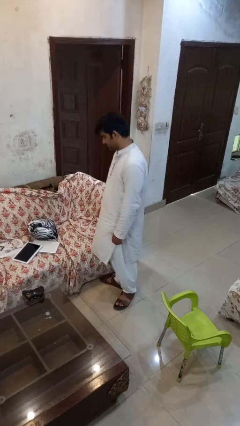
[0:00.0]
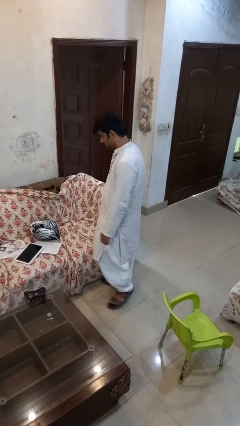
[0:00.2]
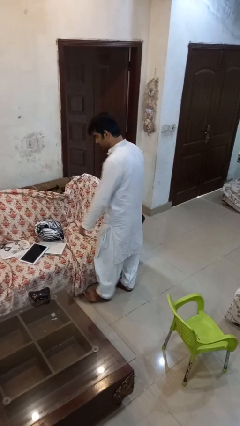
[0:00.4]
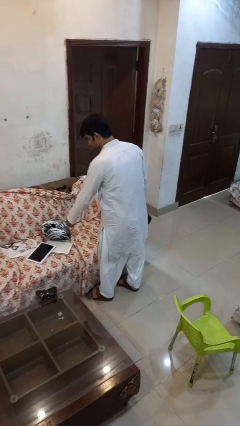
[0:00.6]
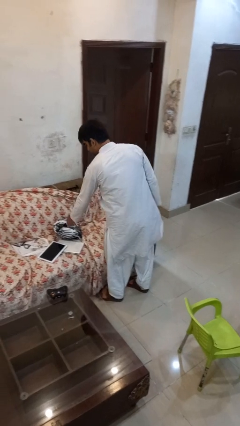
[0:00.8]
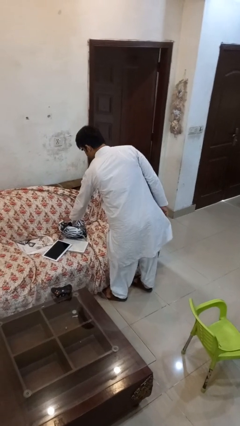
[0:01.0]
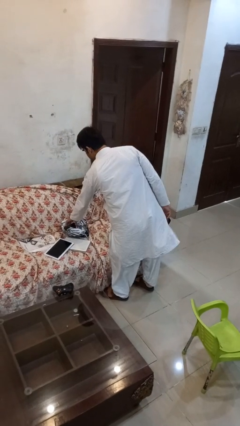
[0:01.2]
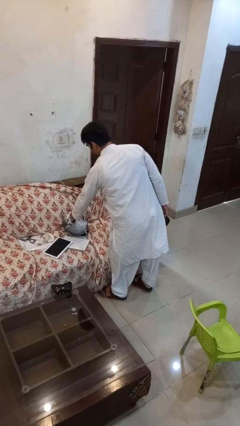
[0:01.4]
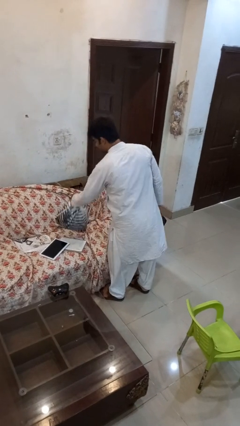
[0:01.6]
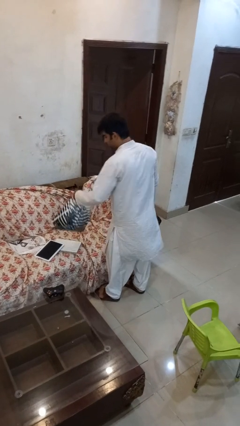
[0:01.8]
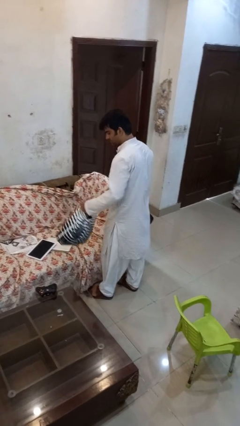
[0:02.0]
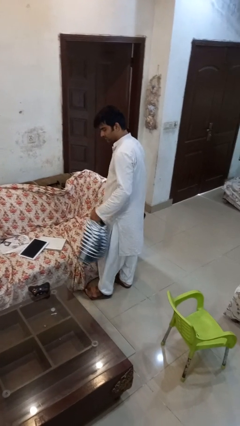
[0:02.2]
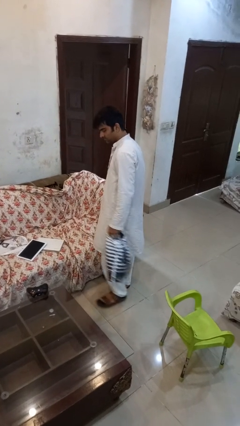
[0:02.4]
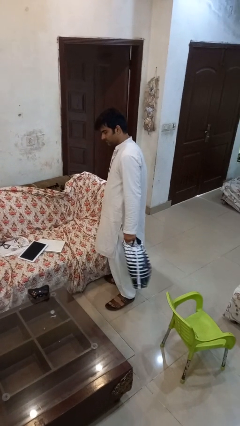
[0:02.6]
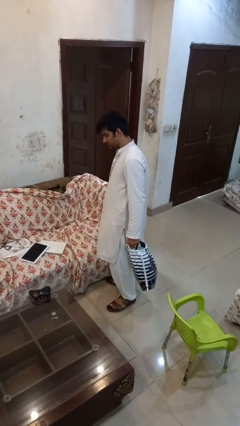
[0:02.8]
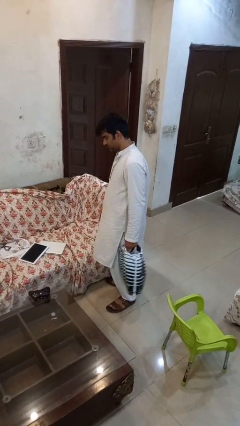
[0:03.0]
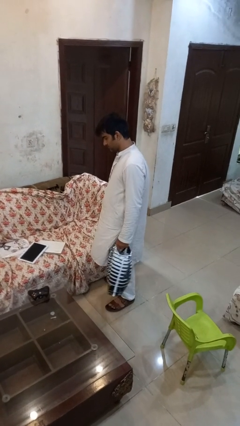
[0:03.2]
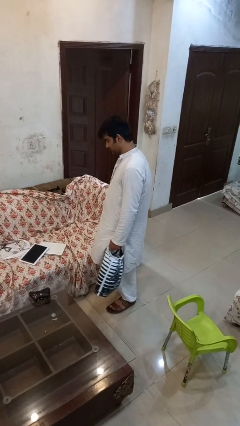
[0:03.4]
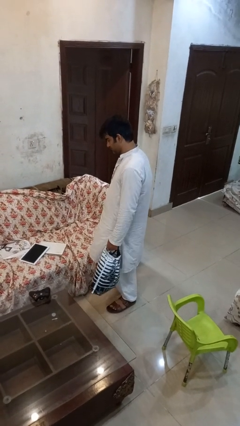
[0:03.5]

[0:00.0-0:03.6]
person picks up object from couch

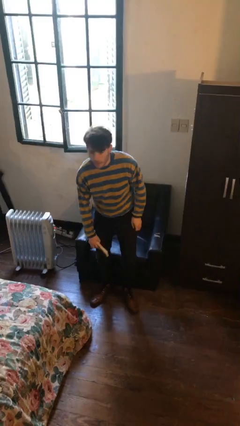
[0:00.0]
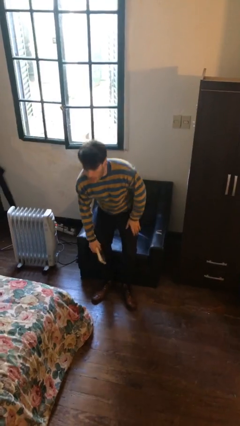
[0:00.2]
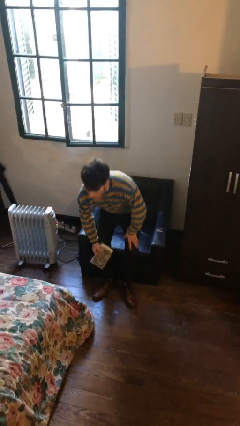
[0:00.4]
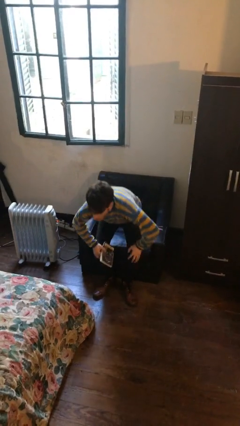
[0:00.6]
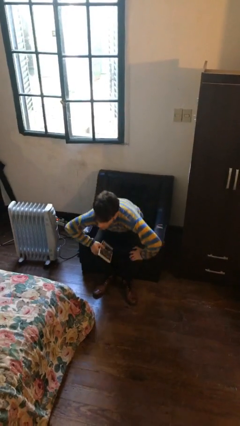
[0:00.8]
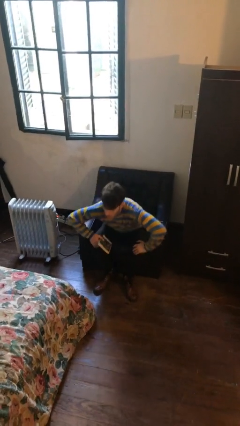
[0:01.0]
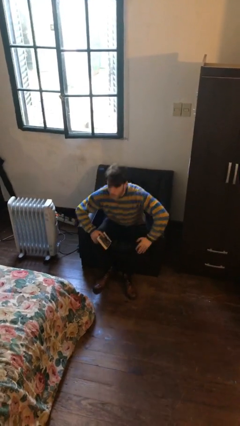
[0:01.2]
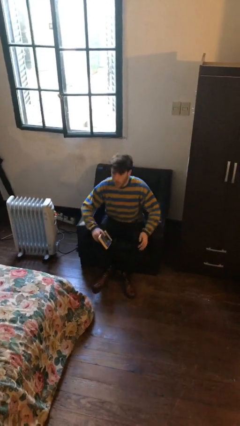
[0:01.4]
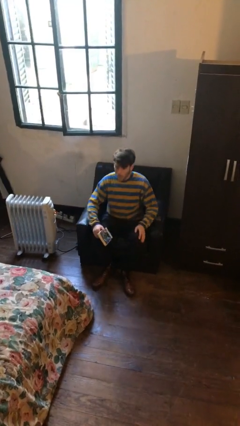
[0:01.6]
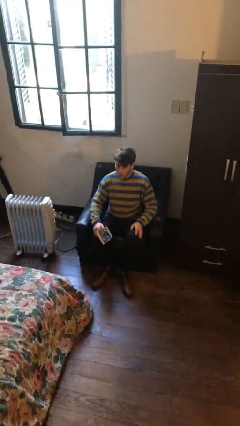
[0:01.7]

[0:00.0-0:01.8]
person sits down

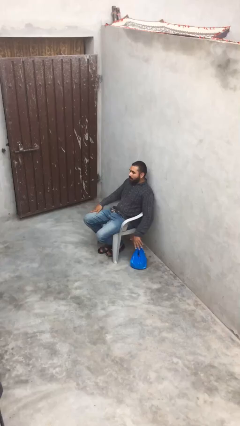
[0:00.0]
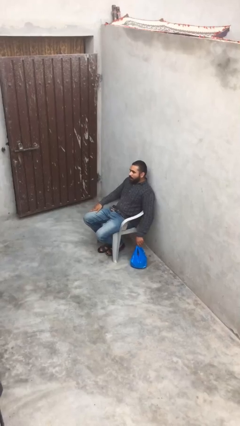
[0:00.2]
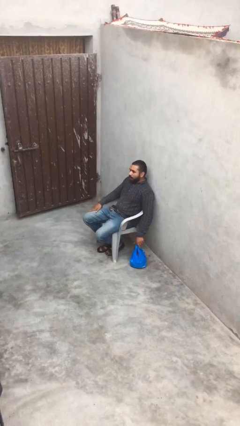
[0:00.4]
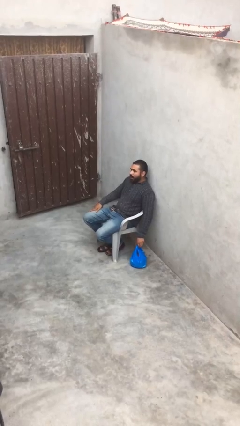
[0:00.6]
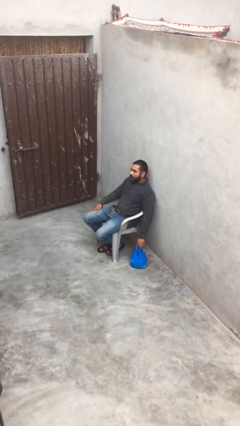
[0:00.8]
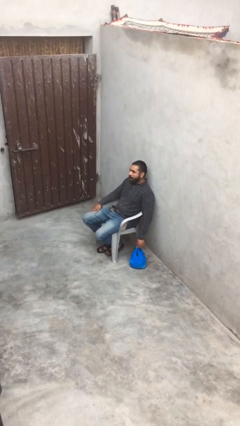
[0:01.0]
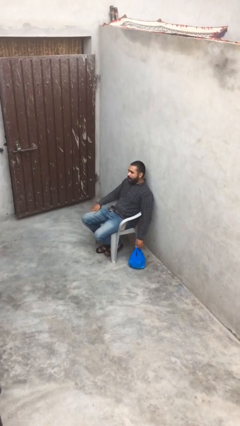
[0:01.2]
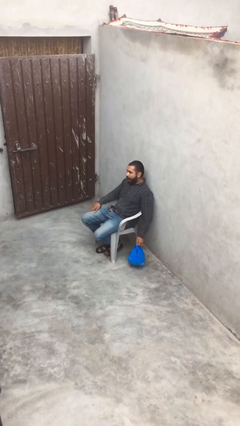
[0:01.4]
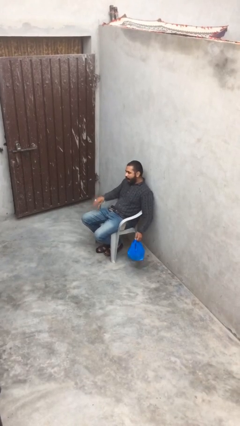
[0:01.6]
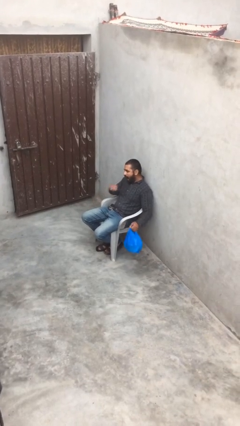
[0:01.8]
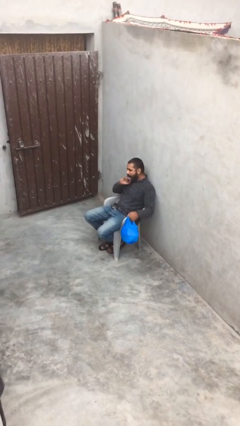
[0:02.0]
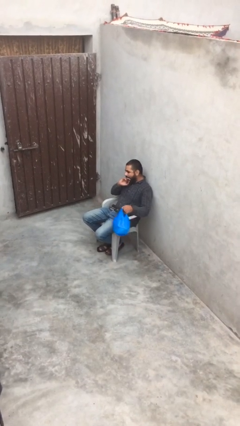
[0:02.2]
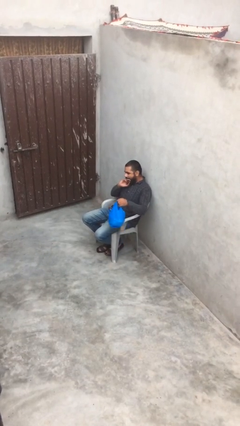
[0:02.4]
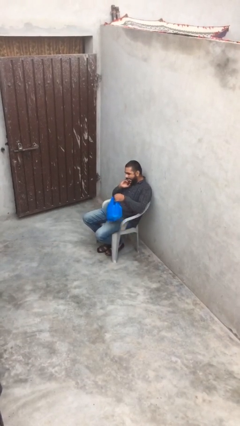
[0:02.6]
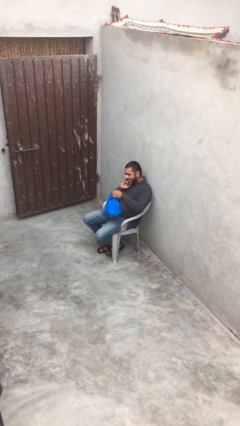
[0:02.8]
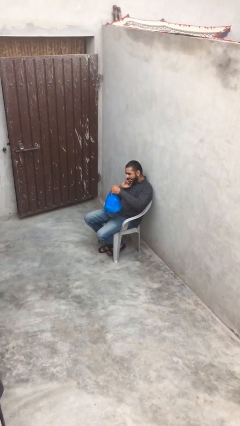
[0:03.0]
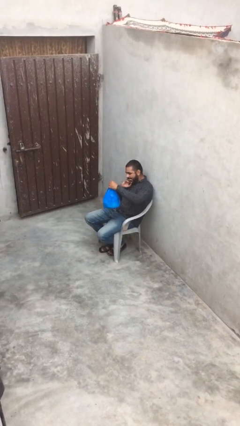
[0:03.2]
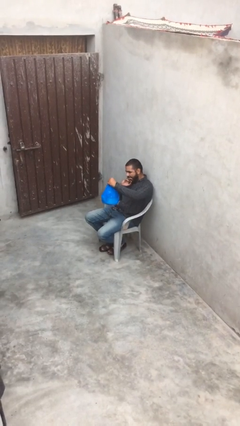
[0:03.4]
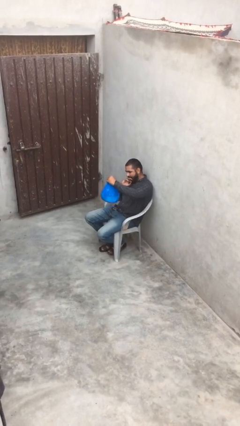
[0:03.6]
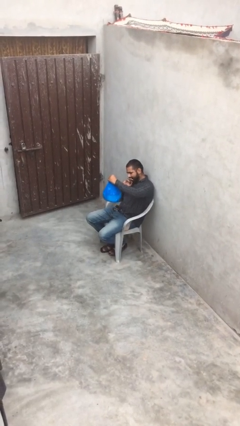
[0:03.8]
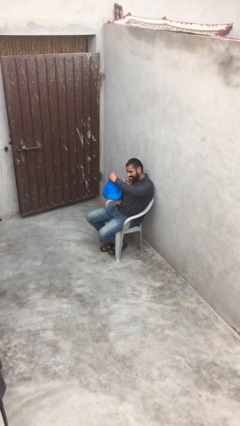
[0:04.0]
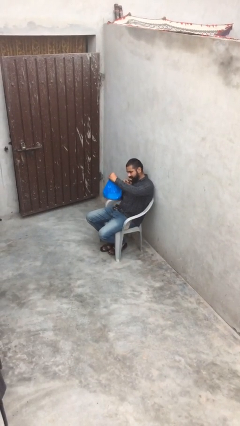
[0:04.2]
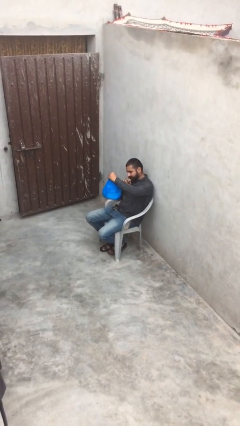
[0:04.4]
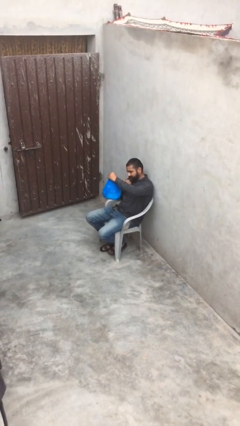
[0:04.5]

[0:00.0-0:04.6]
person picks up object from floor

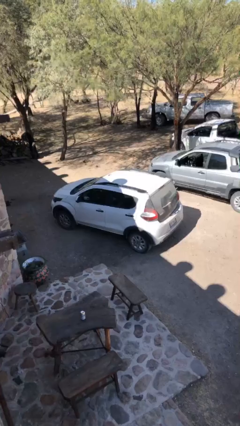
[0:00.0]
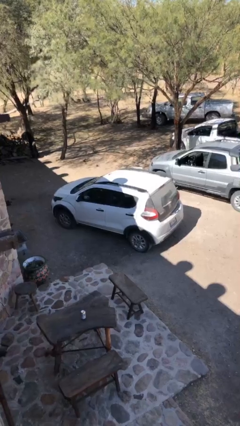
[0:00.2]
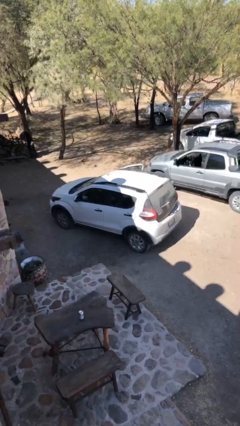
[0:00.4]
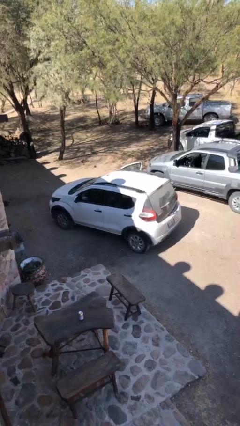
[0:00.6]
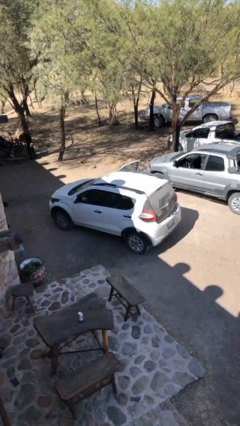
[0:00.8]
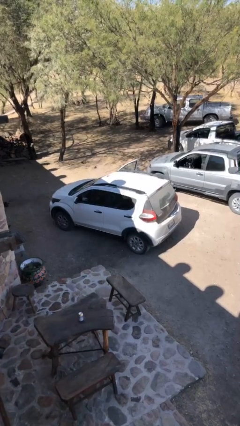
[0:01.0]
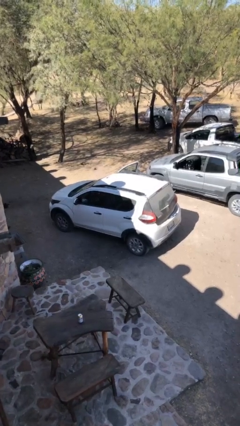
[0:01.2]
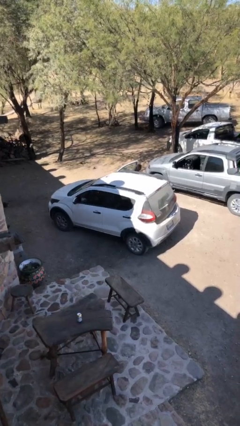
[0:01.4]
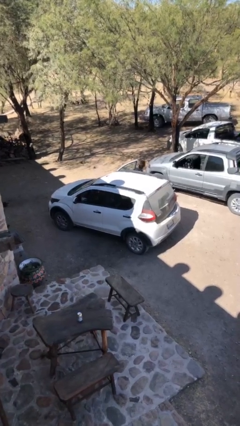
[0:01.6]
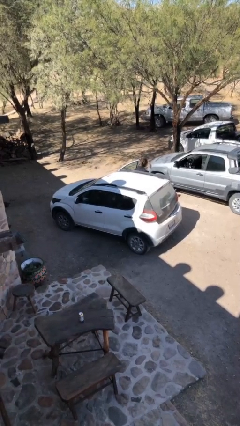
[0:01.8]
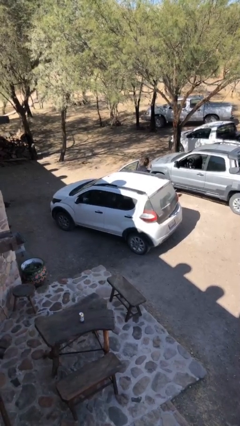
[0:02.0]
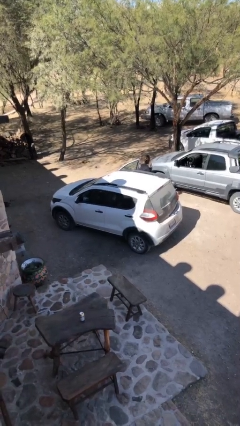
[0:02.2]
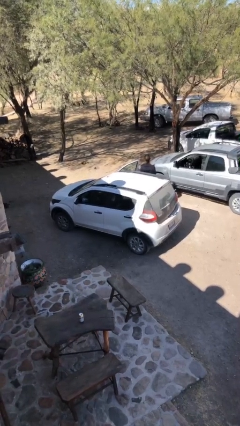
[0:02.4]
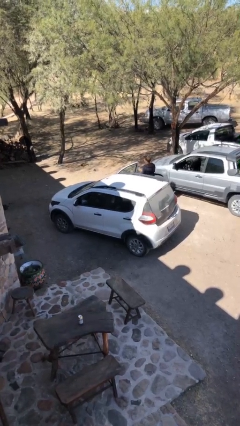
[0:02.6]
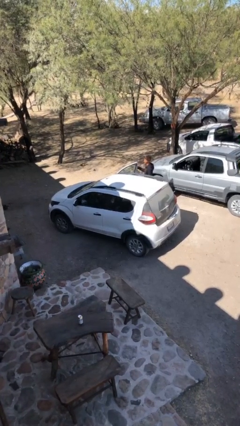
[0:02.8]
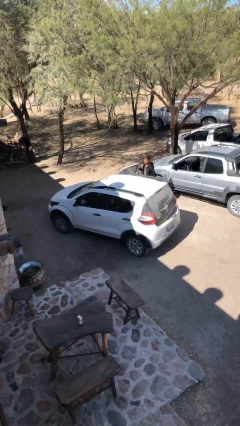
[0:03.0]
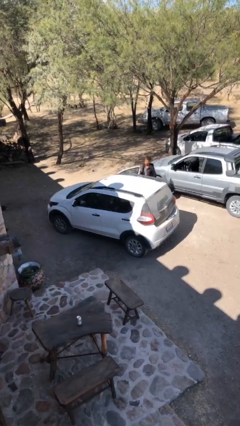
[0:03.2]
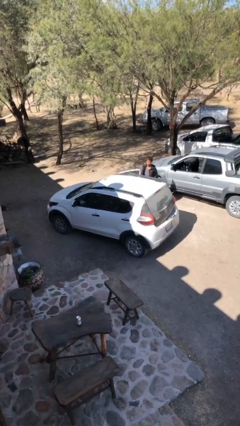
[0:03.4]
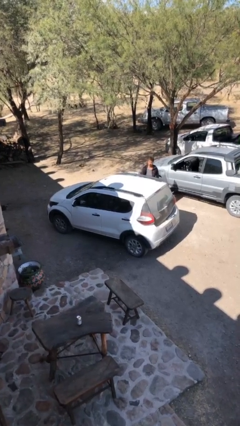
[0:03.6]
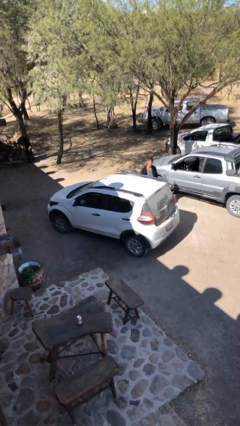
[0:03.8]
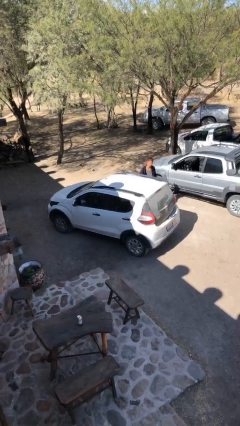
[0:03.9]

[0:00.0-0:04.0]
car drops off person

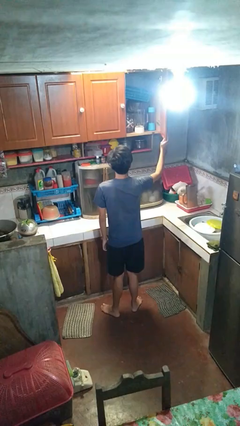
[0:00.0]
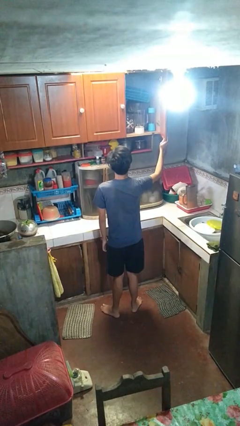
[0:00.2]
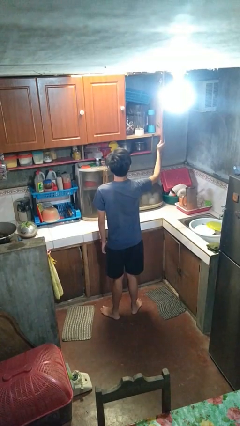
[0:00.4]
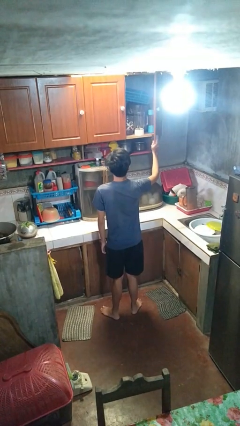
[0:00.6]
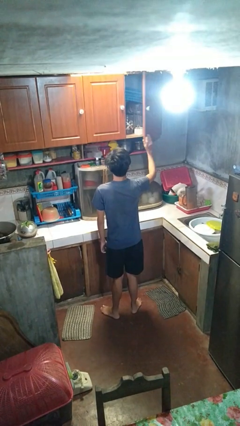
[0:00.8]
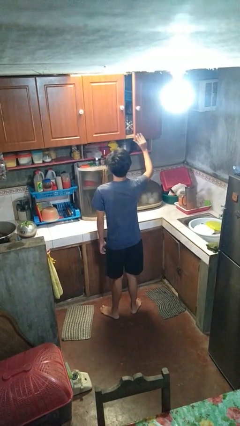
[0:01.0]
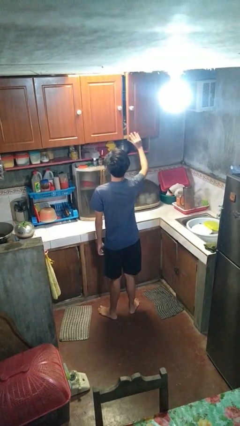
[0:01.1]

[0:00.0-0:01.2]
person closes cabinet

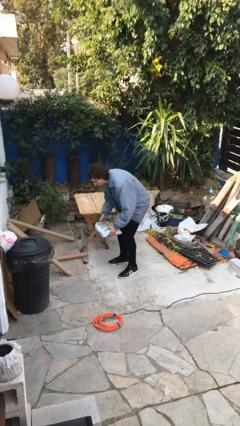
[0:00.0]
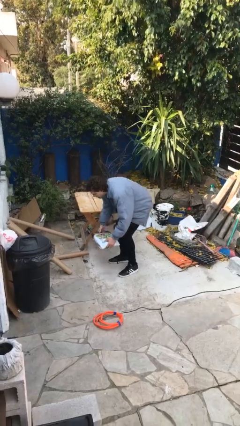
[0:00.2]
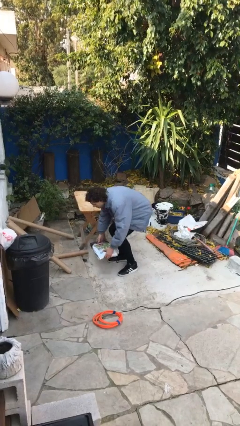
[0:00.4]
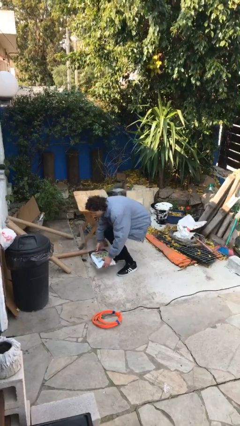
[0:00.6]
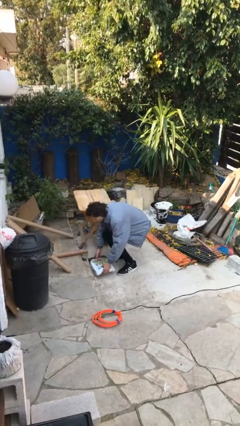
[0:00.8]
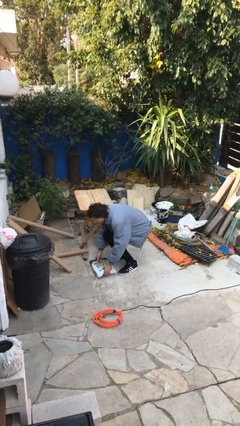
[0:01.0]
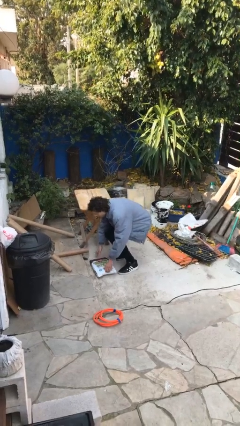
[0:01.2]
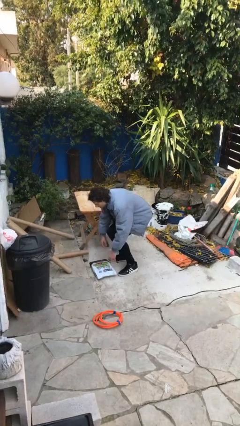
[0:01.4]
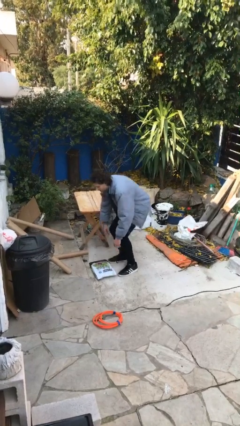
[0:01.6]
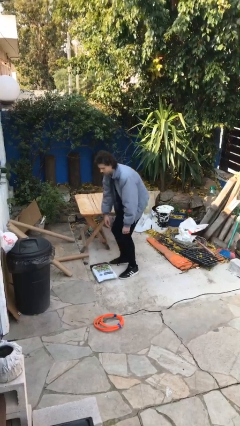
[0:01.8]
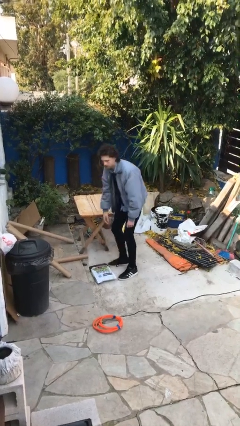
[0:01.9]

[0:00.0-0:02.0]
person puts down object on floor
